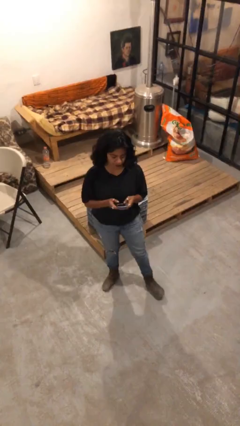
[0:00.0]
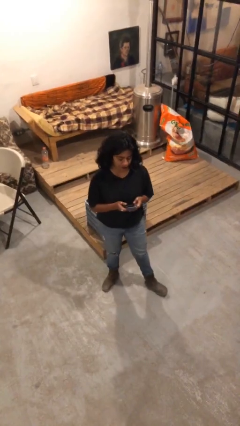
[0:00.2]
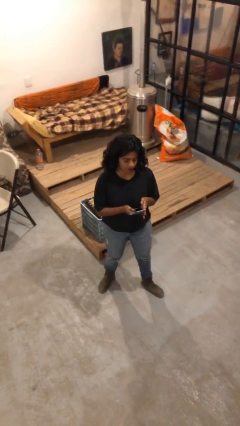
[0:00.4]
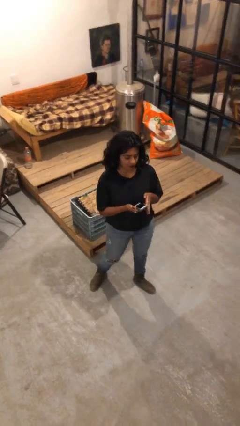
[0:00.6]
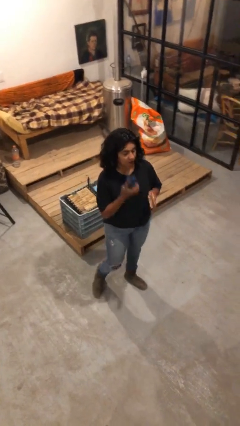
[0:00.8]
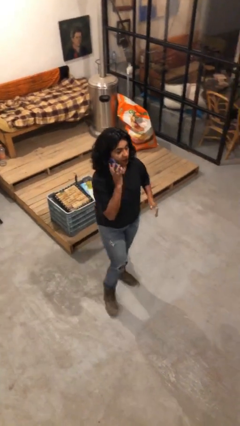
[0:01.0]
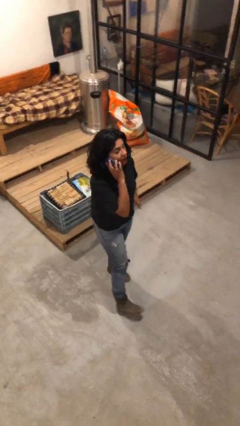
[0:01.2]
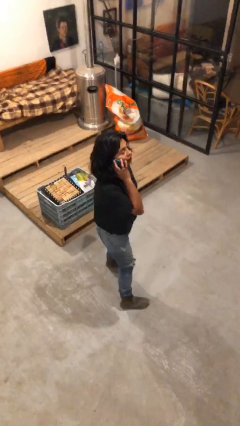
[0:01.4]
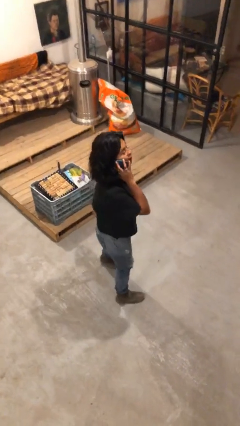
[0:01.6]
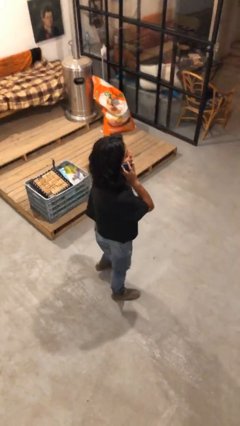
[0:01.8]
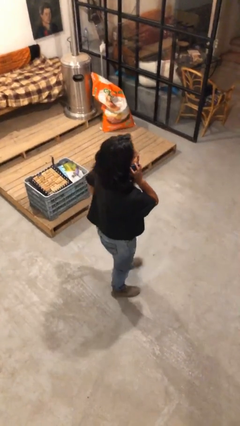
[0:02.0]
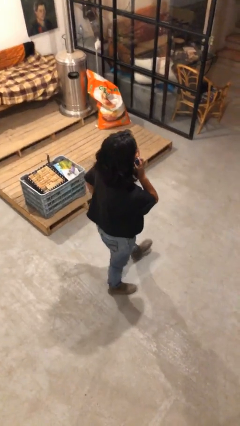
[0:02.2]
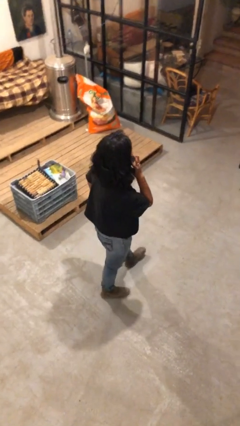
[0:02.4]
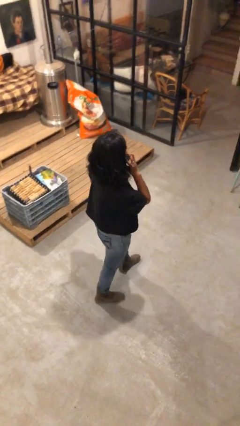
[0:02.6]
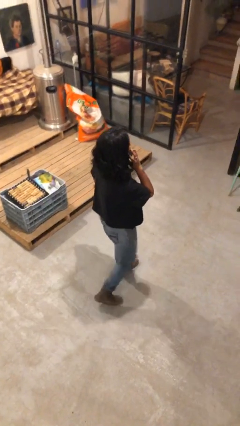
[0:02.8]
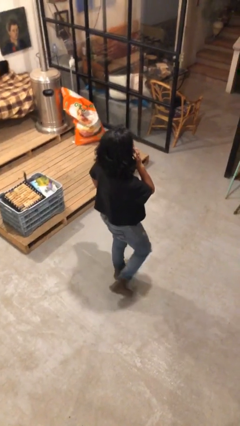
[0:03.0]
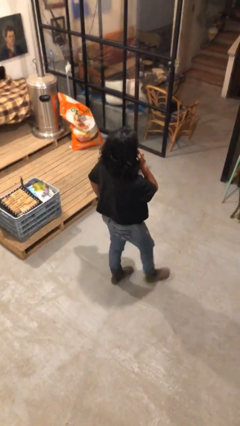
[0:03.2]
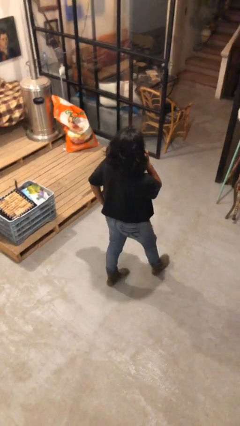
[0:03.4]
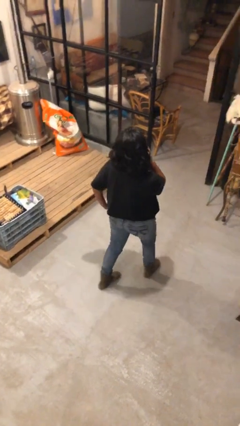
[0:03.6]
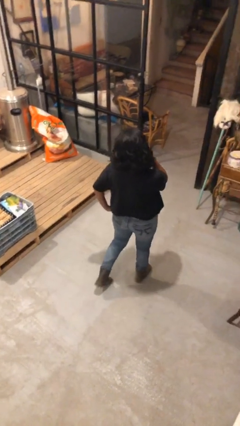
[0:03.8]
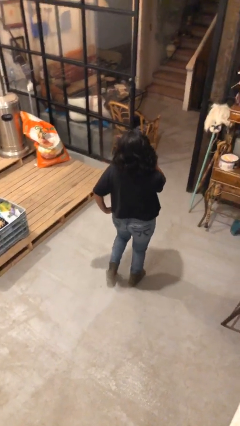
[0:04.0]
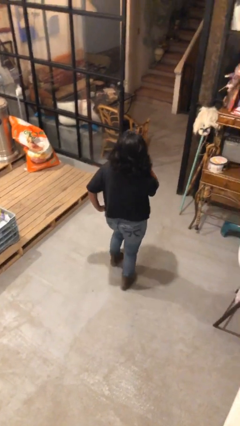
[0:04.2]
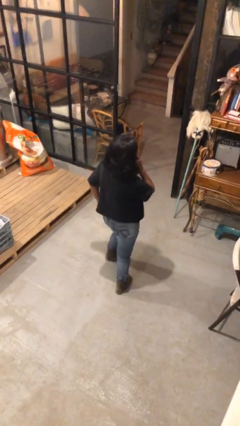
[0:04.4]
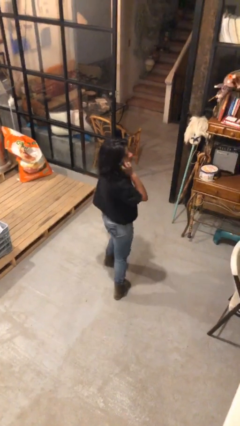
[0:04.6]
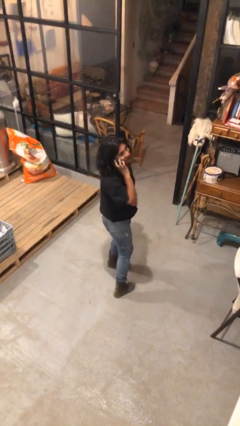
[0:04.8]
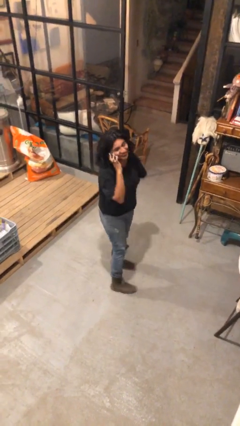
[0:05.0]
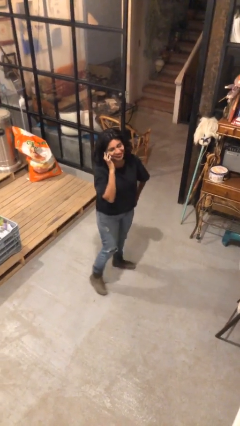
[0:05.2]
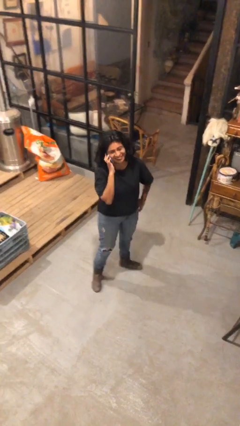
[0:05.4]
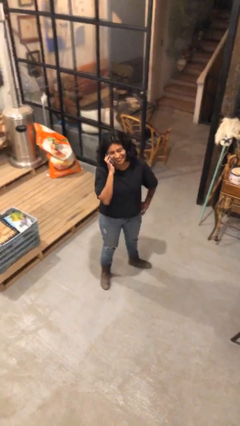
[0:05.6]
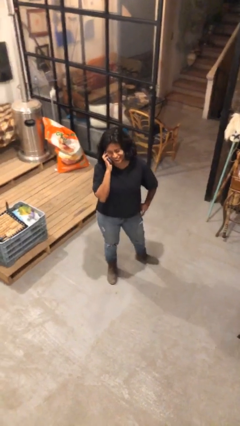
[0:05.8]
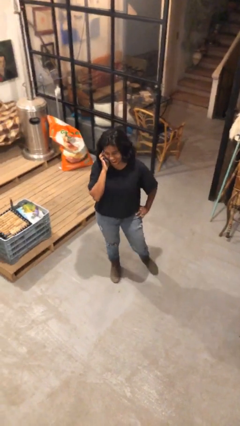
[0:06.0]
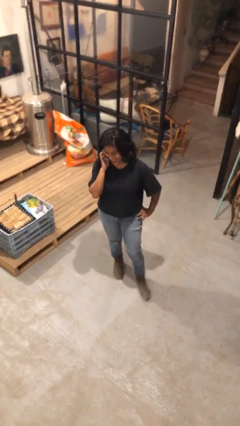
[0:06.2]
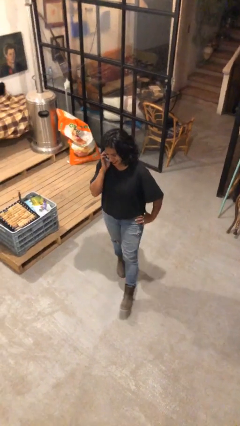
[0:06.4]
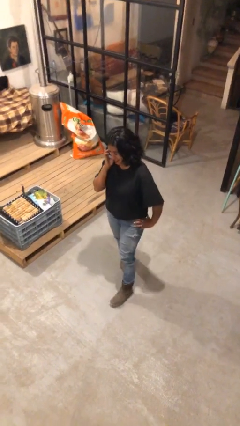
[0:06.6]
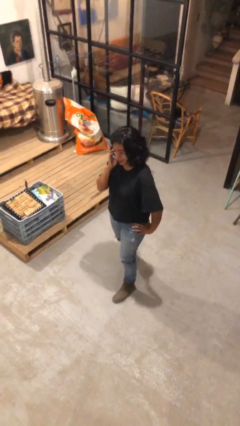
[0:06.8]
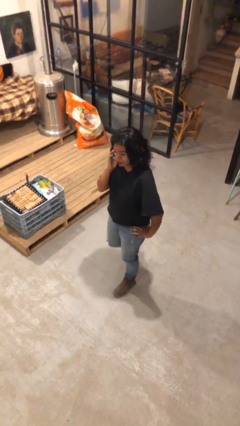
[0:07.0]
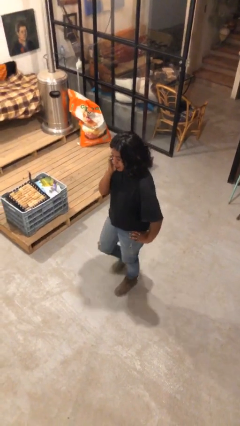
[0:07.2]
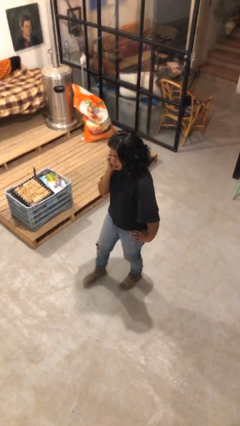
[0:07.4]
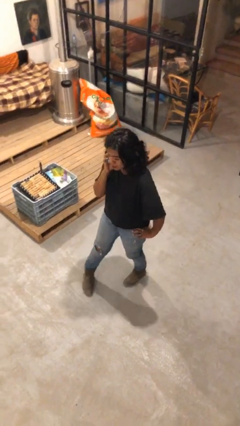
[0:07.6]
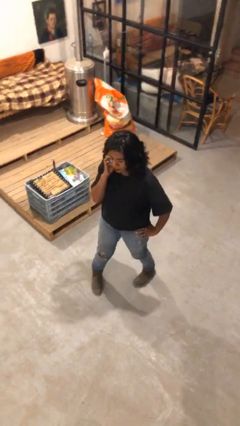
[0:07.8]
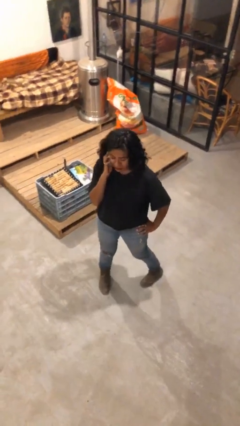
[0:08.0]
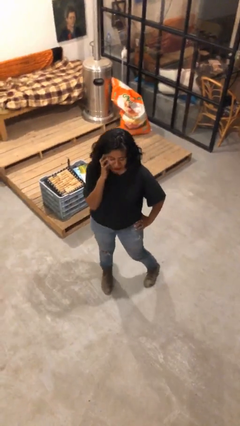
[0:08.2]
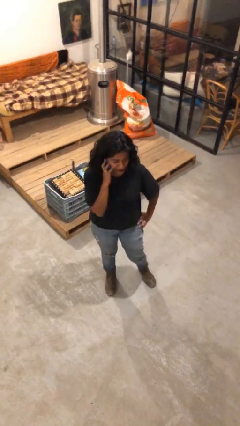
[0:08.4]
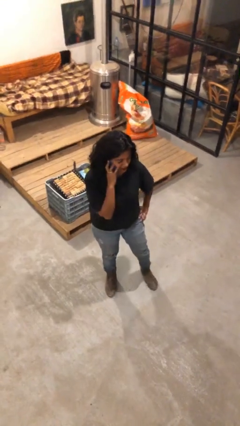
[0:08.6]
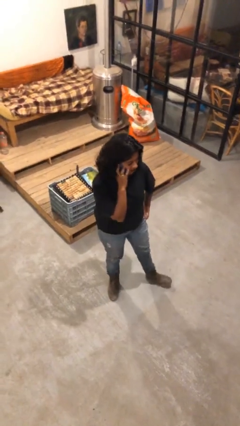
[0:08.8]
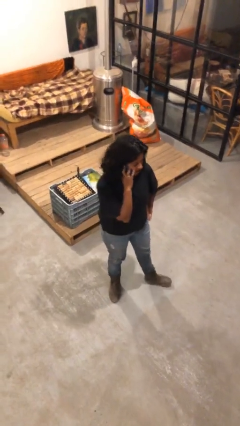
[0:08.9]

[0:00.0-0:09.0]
person talks on phone

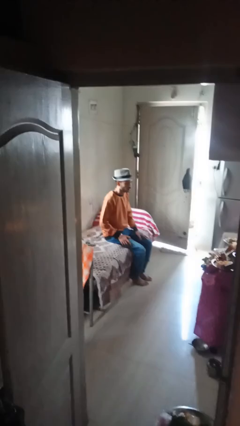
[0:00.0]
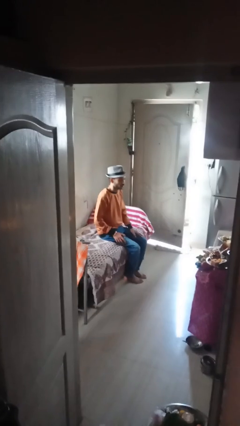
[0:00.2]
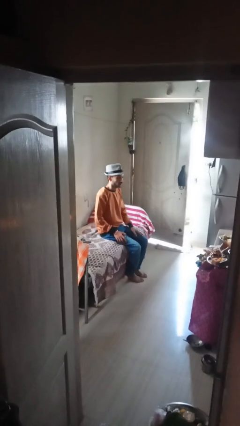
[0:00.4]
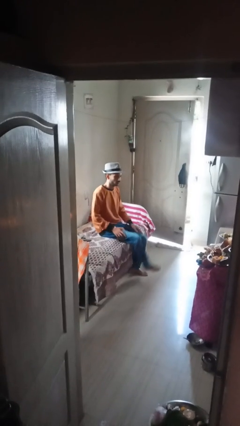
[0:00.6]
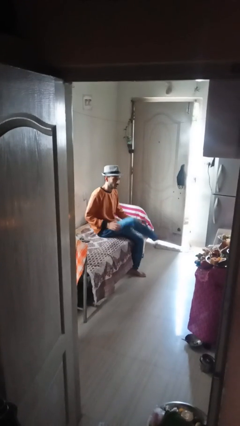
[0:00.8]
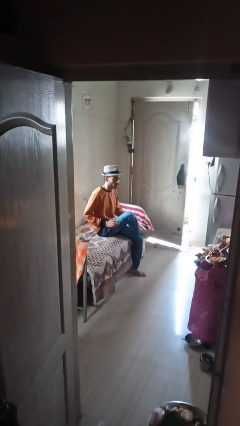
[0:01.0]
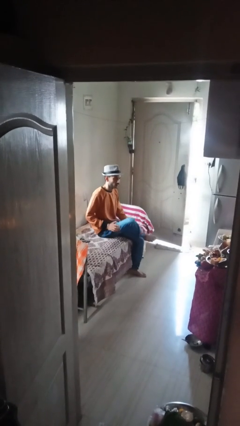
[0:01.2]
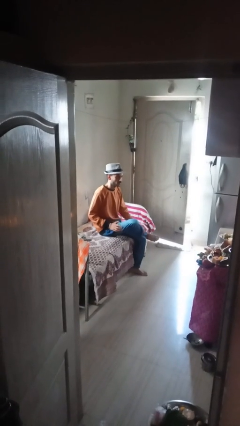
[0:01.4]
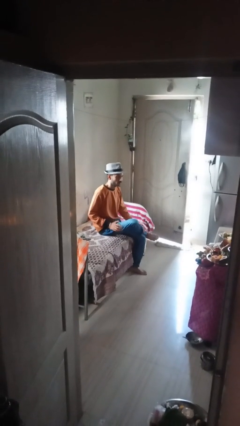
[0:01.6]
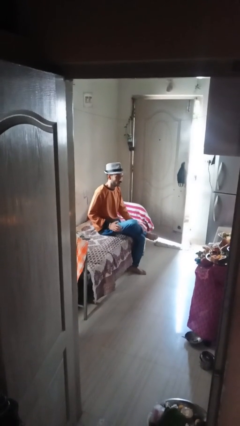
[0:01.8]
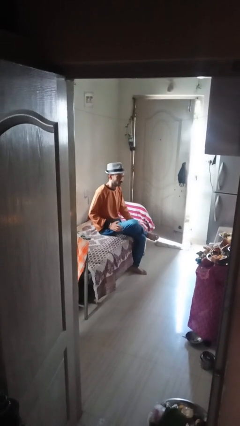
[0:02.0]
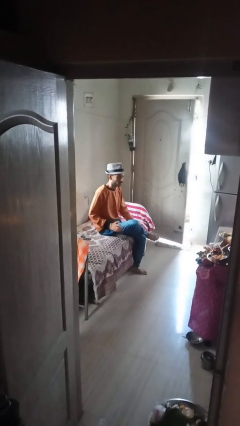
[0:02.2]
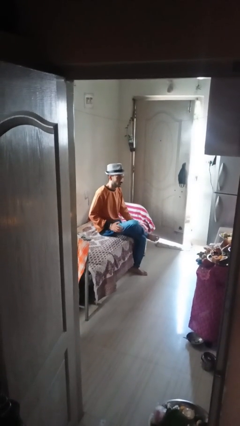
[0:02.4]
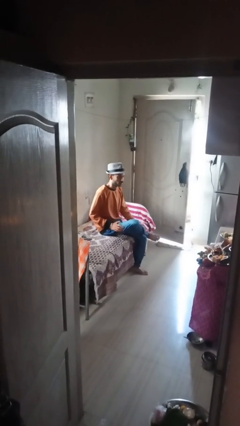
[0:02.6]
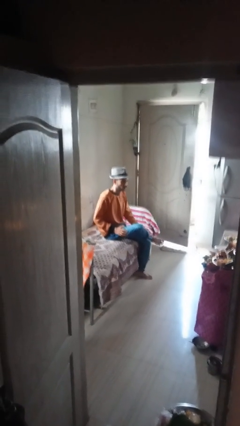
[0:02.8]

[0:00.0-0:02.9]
person crosses legs

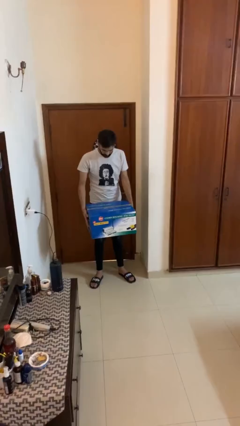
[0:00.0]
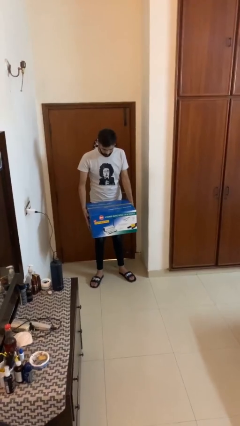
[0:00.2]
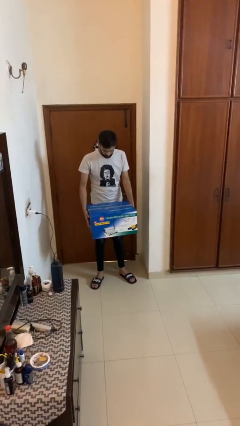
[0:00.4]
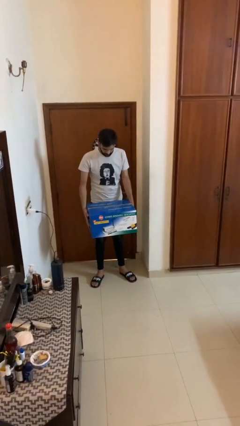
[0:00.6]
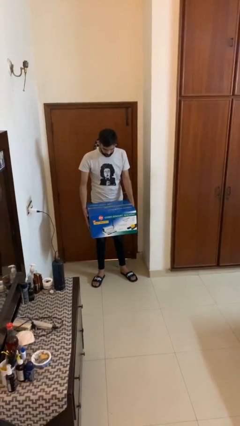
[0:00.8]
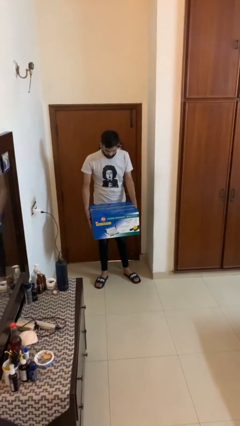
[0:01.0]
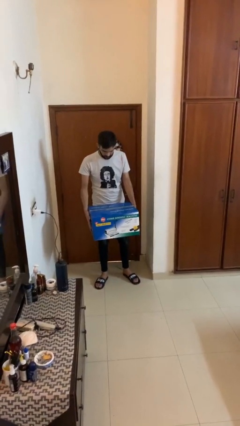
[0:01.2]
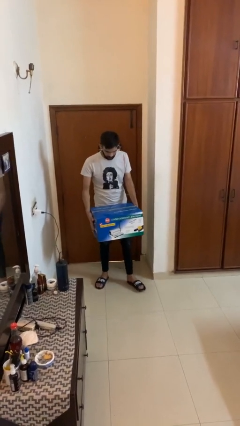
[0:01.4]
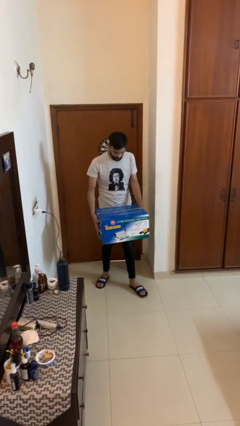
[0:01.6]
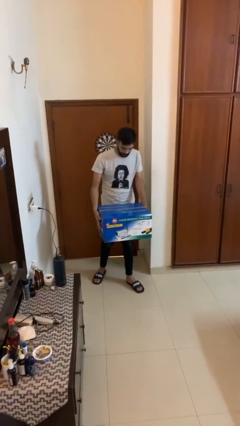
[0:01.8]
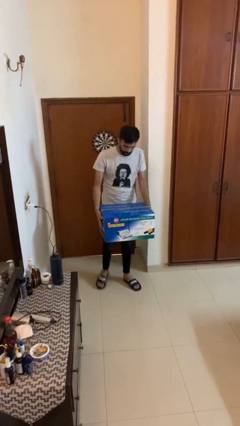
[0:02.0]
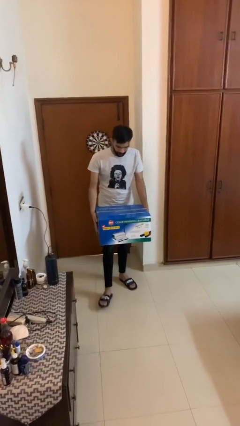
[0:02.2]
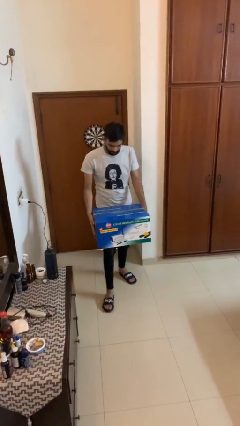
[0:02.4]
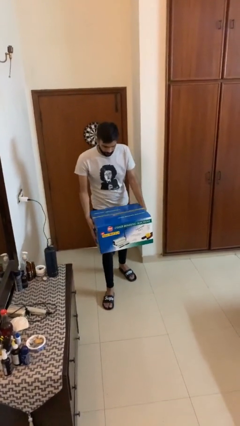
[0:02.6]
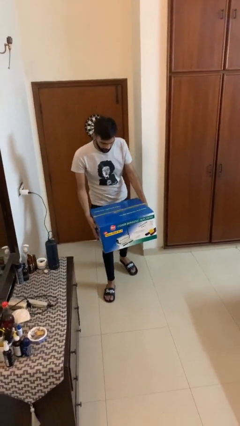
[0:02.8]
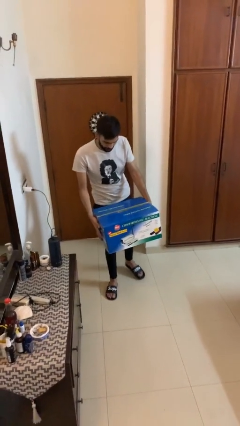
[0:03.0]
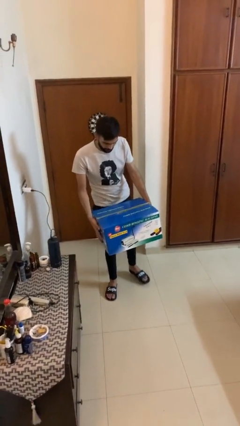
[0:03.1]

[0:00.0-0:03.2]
person carries heavy object

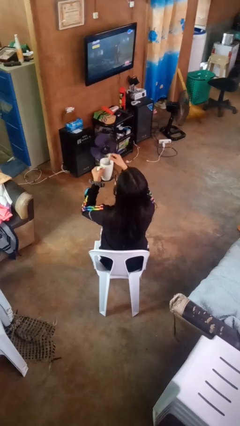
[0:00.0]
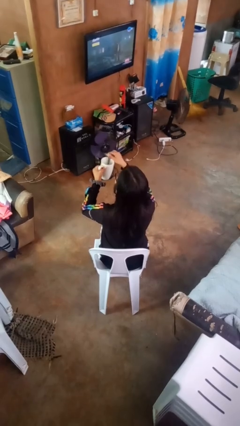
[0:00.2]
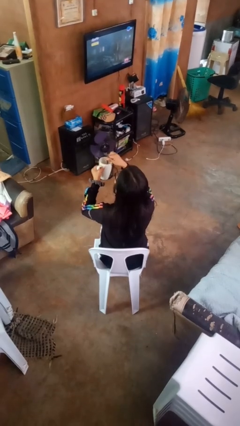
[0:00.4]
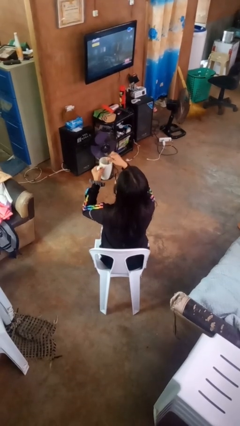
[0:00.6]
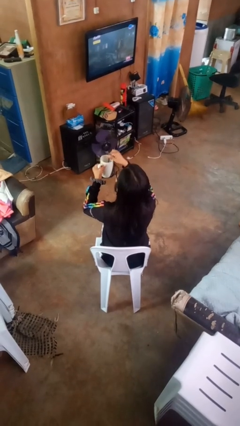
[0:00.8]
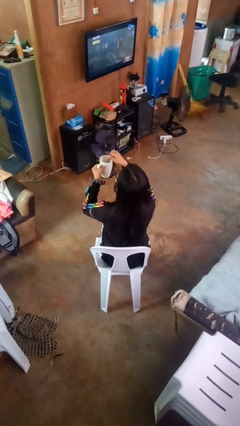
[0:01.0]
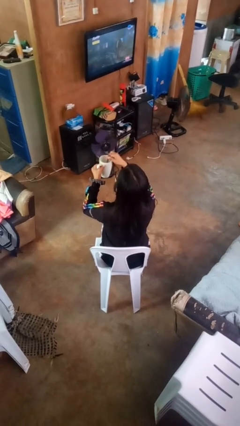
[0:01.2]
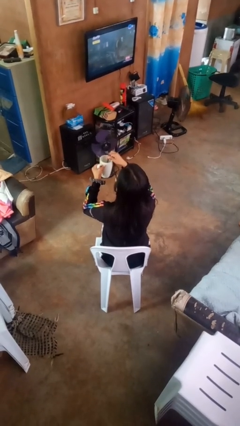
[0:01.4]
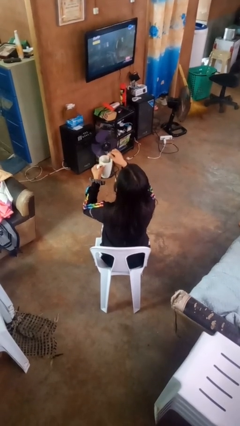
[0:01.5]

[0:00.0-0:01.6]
person stirs mug

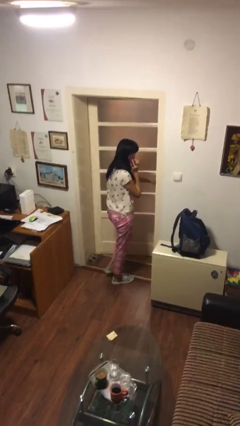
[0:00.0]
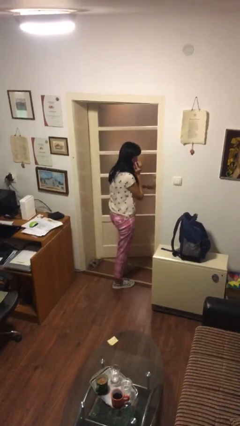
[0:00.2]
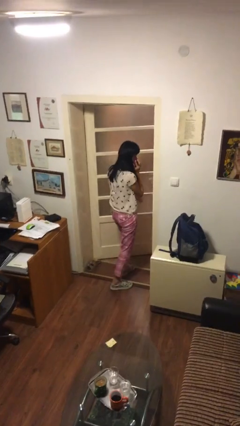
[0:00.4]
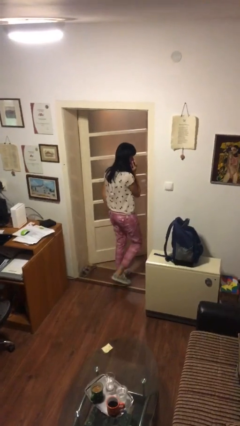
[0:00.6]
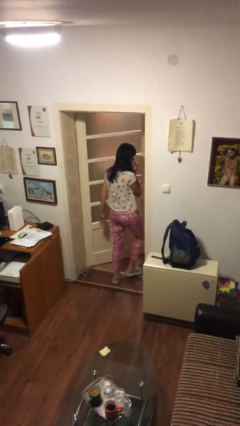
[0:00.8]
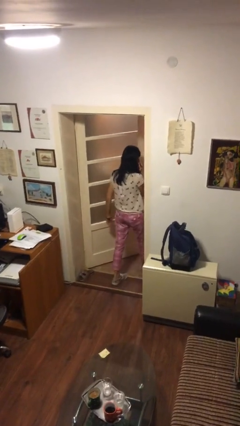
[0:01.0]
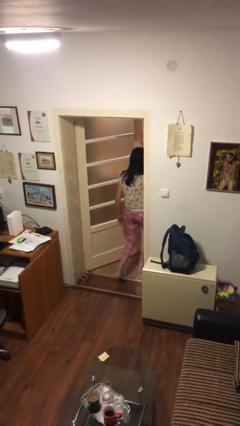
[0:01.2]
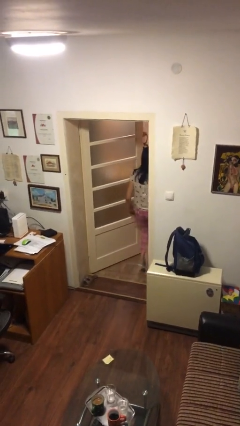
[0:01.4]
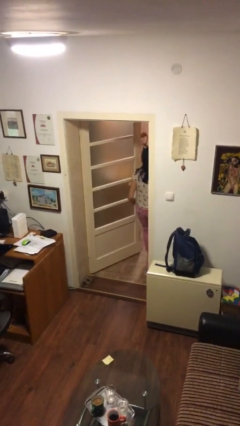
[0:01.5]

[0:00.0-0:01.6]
person exits scene through structure
